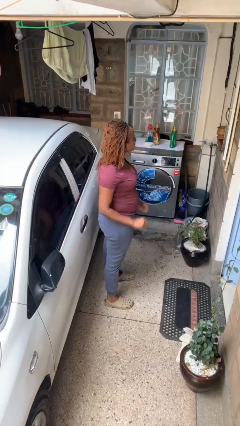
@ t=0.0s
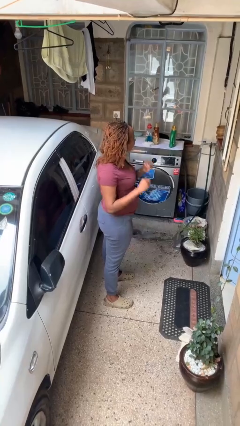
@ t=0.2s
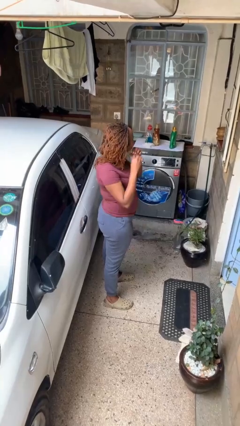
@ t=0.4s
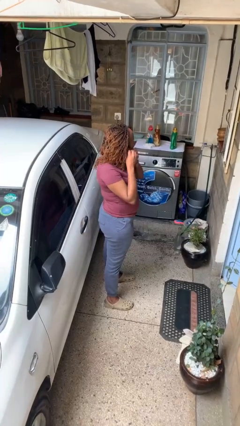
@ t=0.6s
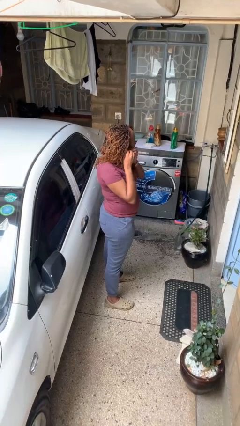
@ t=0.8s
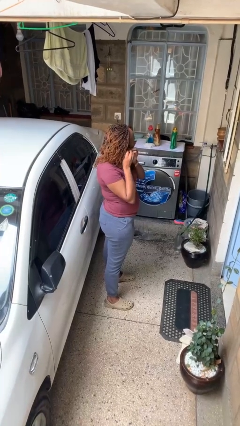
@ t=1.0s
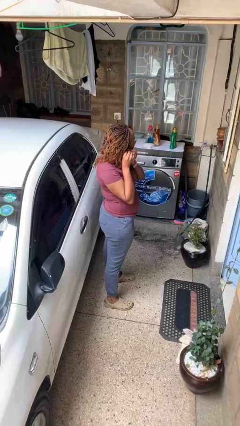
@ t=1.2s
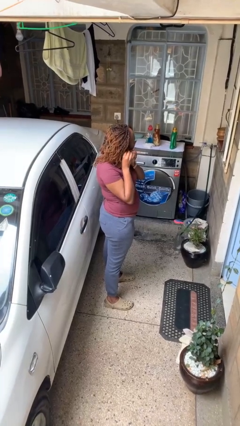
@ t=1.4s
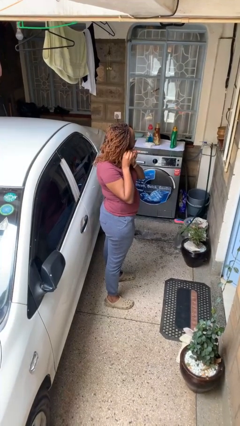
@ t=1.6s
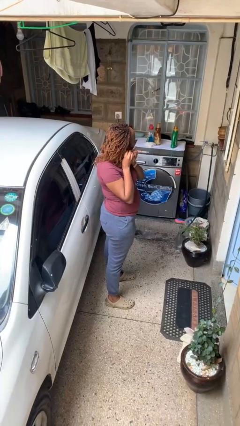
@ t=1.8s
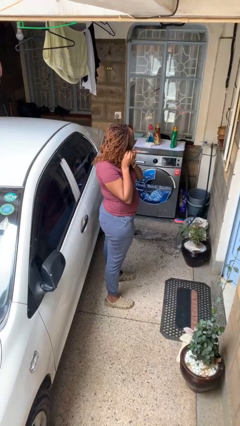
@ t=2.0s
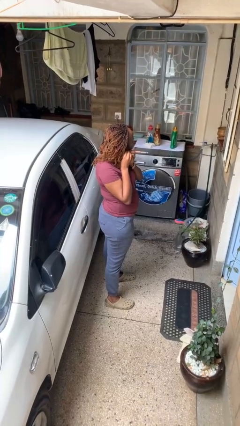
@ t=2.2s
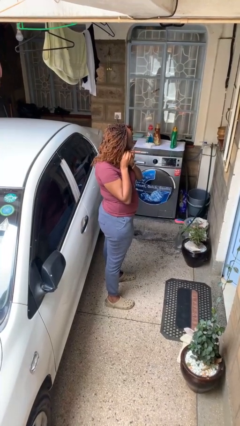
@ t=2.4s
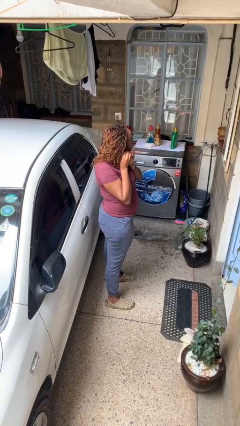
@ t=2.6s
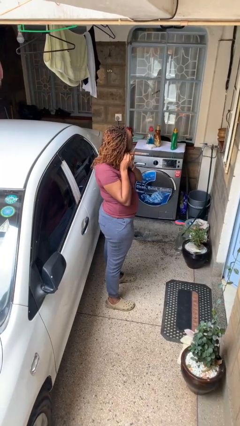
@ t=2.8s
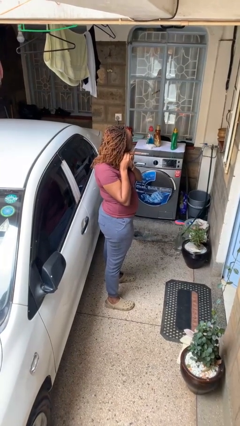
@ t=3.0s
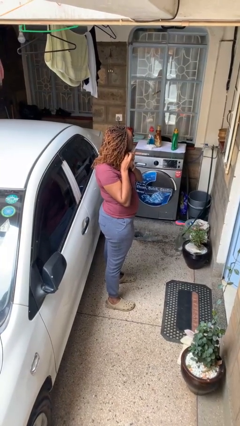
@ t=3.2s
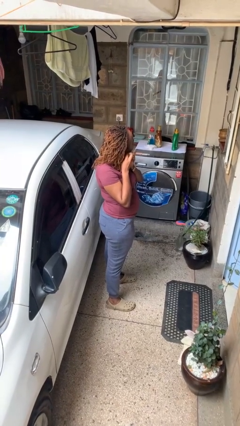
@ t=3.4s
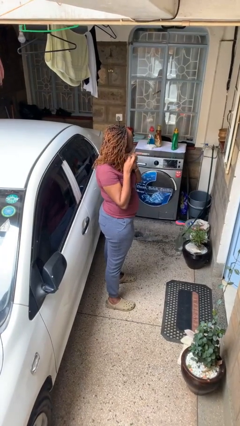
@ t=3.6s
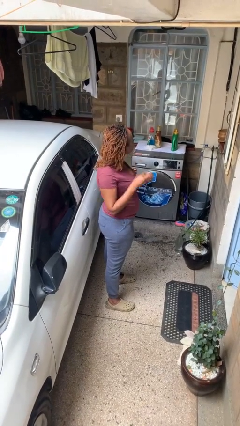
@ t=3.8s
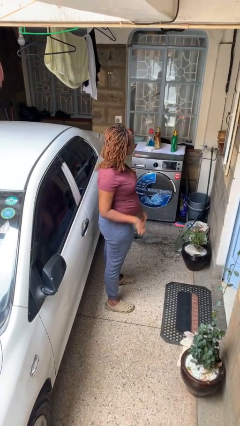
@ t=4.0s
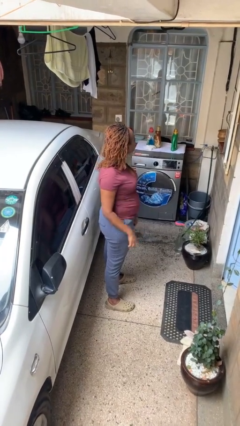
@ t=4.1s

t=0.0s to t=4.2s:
person puts on earrings

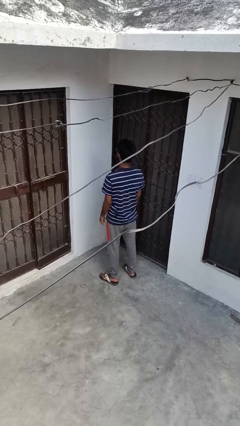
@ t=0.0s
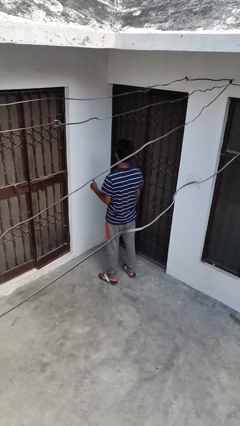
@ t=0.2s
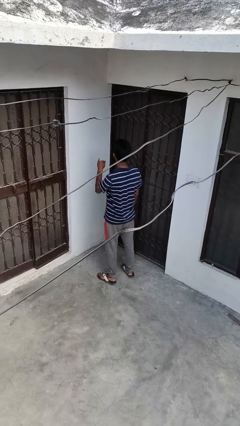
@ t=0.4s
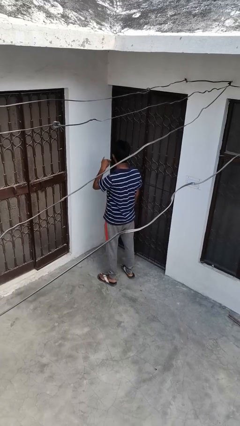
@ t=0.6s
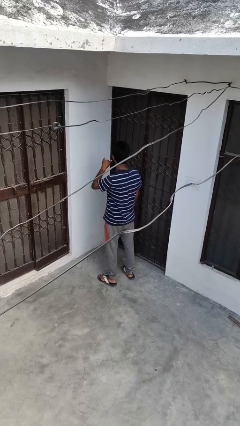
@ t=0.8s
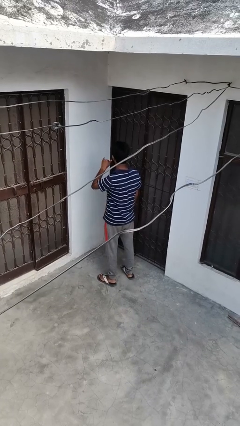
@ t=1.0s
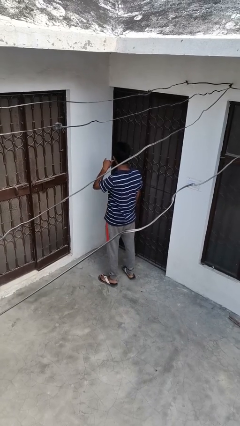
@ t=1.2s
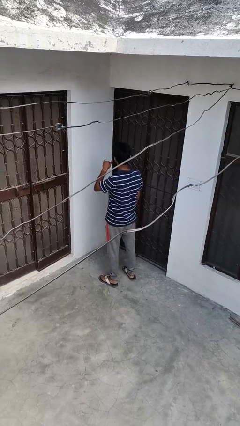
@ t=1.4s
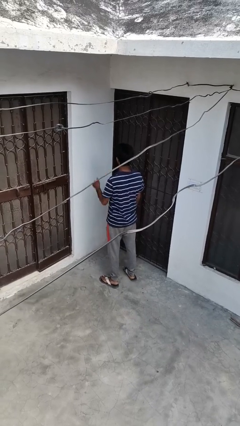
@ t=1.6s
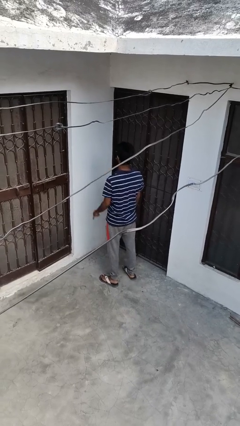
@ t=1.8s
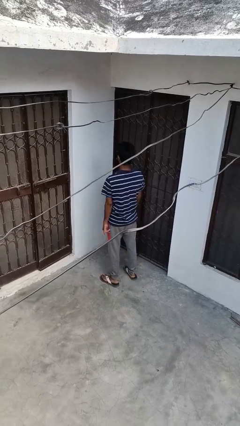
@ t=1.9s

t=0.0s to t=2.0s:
person gestures call me

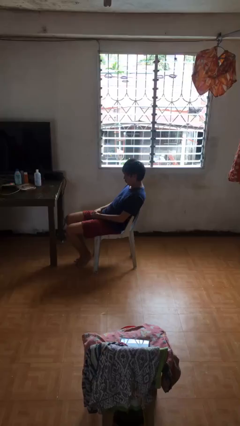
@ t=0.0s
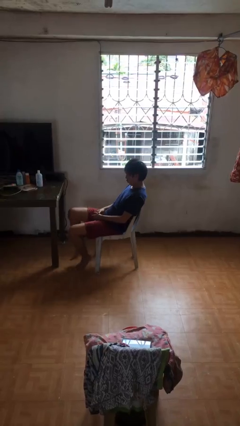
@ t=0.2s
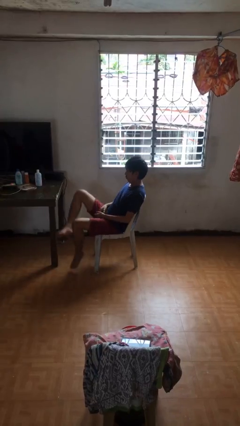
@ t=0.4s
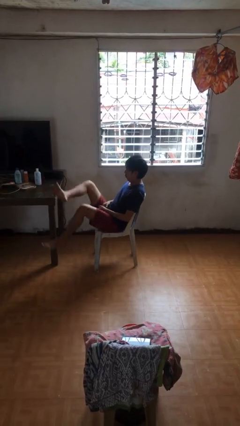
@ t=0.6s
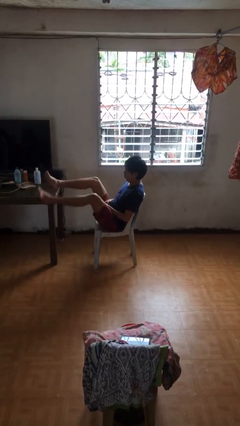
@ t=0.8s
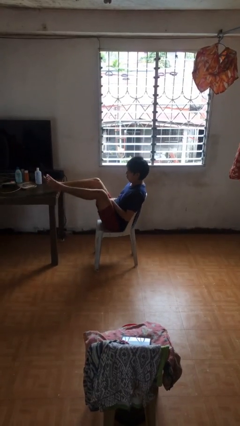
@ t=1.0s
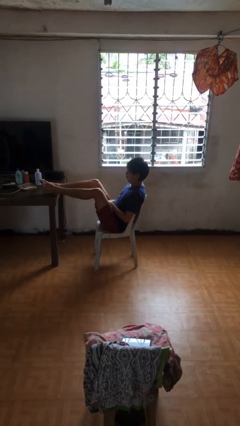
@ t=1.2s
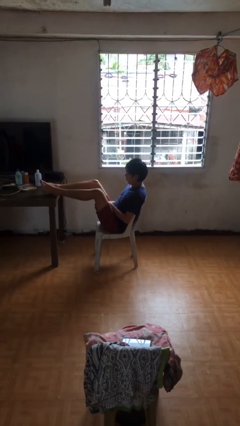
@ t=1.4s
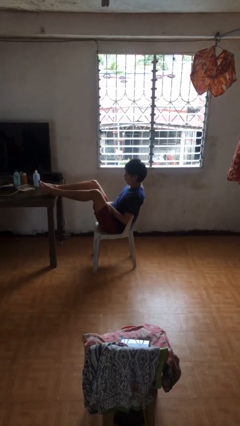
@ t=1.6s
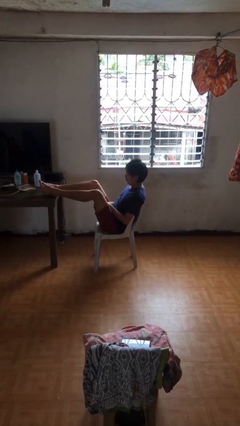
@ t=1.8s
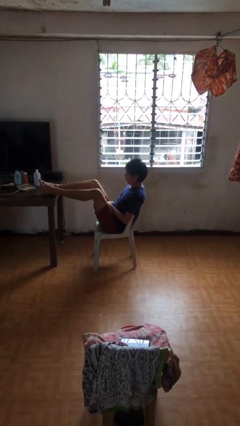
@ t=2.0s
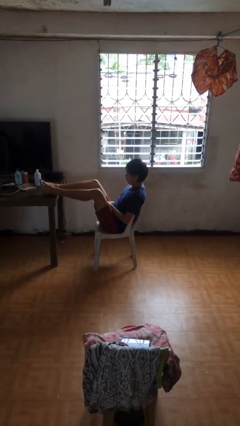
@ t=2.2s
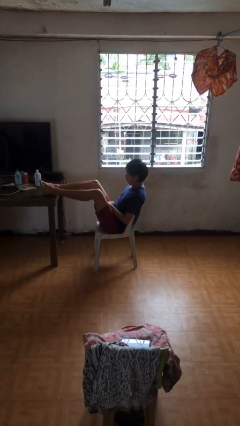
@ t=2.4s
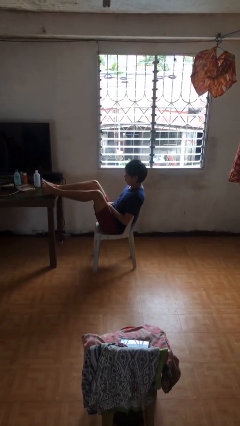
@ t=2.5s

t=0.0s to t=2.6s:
person puts feet up

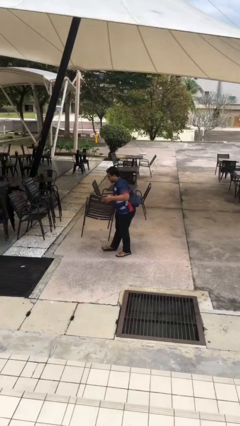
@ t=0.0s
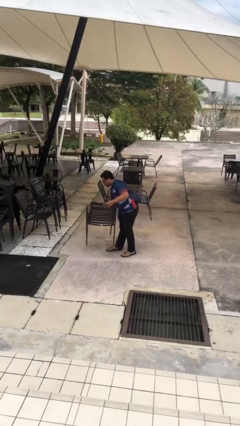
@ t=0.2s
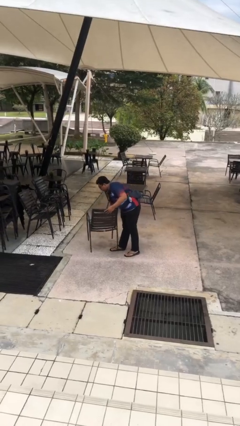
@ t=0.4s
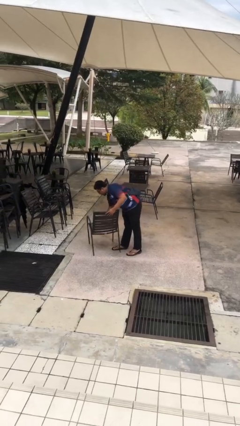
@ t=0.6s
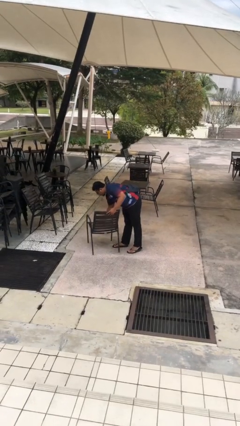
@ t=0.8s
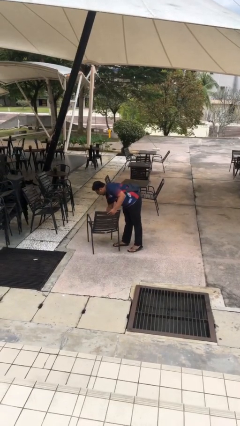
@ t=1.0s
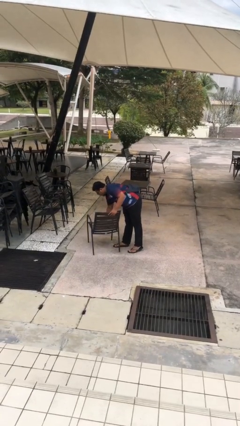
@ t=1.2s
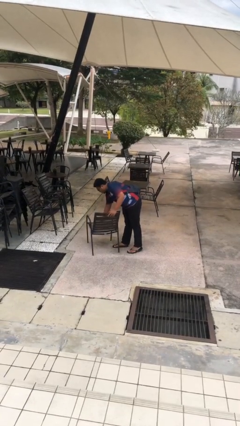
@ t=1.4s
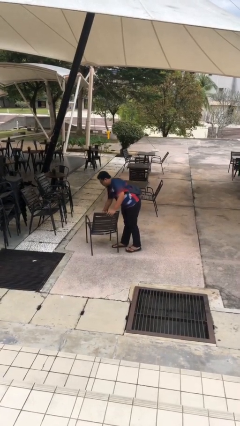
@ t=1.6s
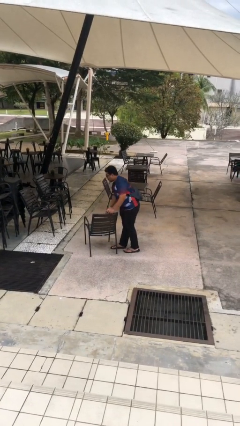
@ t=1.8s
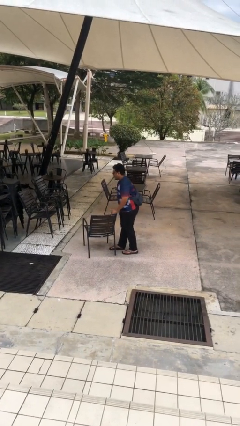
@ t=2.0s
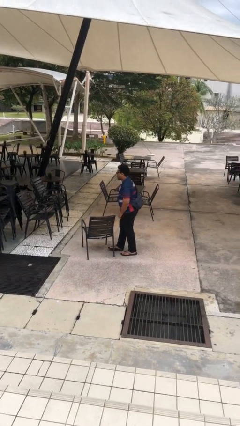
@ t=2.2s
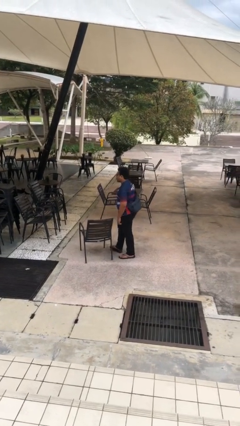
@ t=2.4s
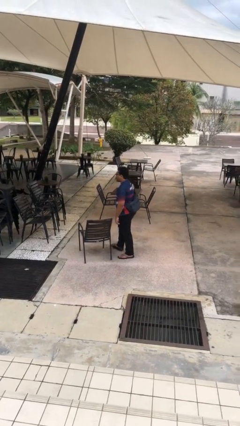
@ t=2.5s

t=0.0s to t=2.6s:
person puts down object on floor

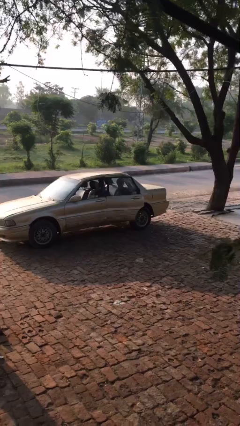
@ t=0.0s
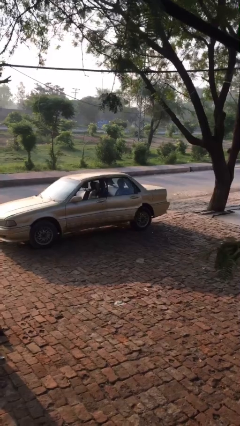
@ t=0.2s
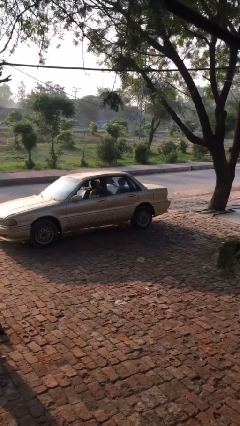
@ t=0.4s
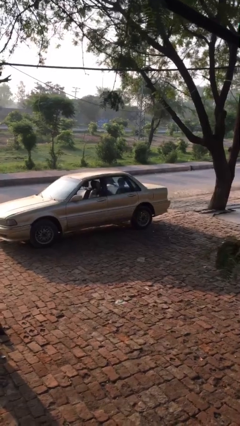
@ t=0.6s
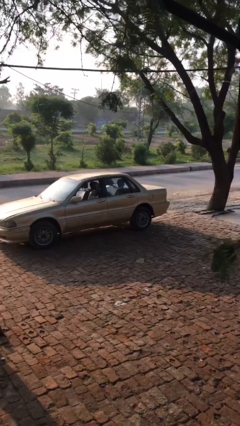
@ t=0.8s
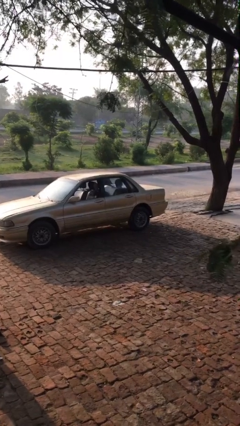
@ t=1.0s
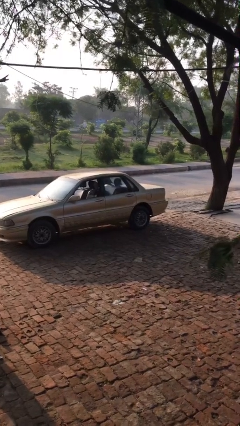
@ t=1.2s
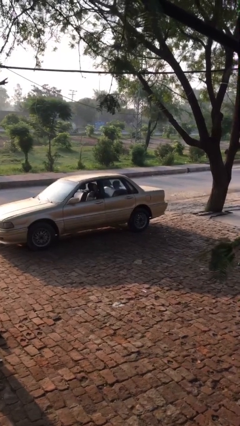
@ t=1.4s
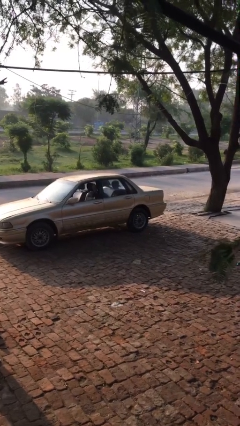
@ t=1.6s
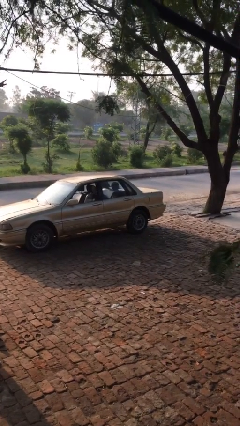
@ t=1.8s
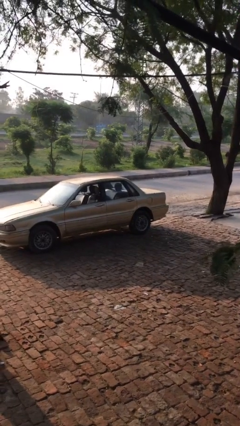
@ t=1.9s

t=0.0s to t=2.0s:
person closes car door

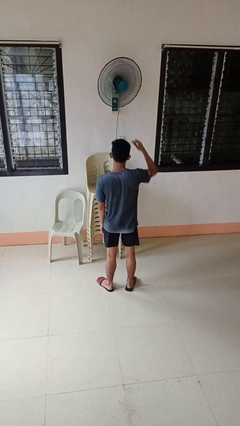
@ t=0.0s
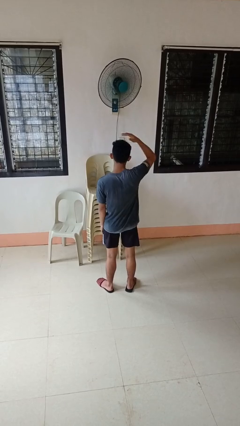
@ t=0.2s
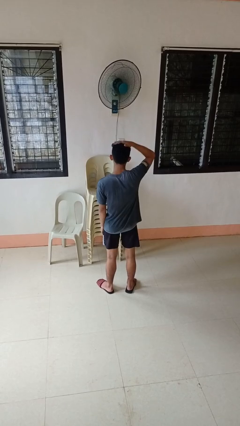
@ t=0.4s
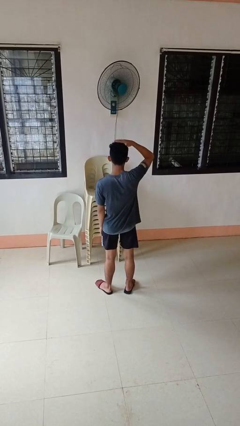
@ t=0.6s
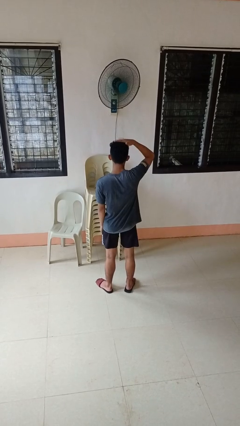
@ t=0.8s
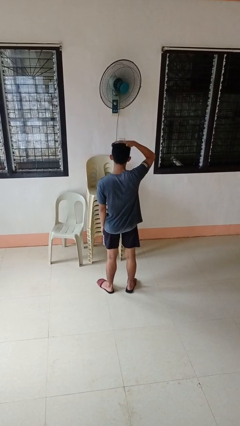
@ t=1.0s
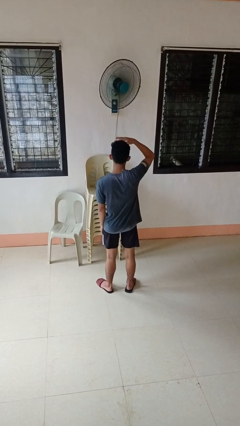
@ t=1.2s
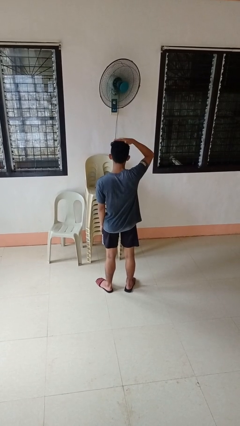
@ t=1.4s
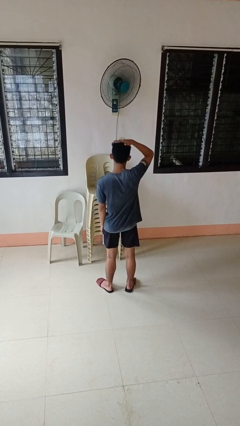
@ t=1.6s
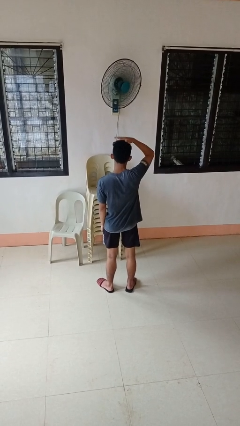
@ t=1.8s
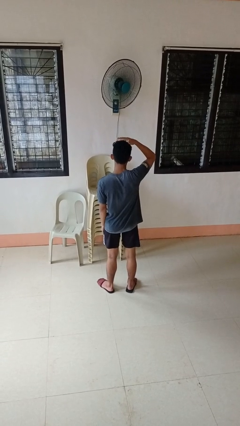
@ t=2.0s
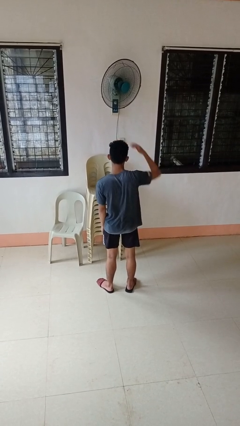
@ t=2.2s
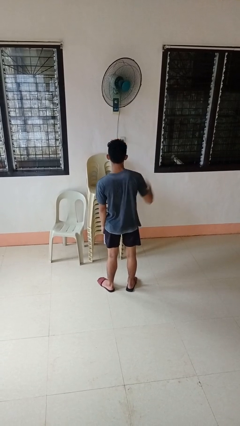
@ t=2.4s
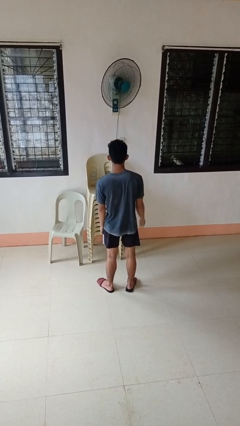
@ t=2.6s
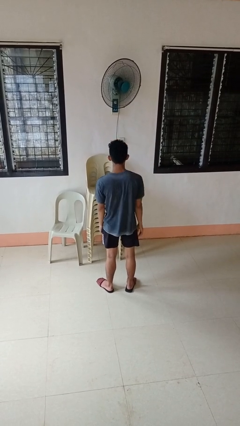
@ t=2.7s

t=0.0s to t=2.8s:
person pats head

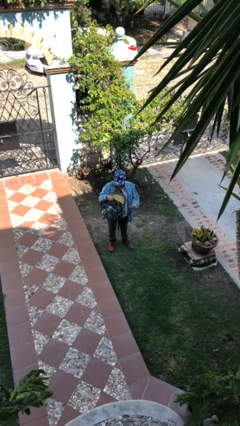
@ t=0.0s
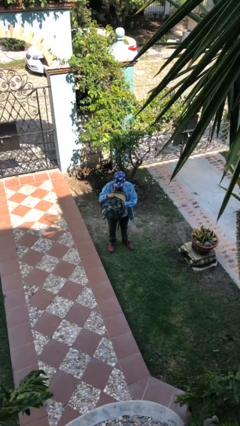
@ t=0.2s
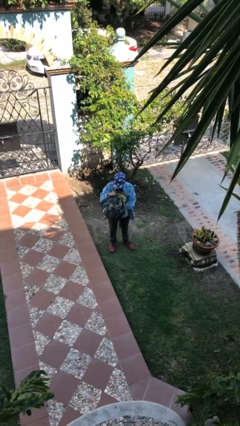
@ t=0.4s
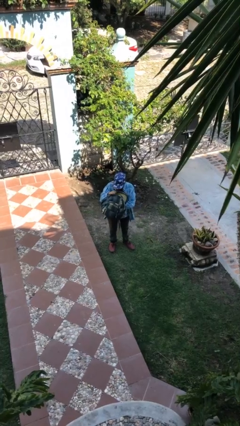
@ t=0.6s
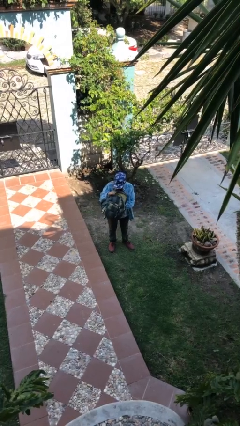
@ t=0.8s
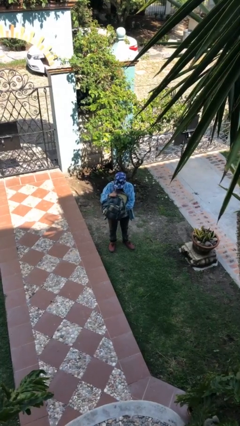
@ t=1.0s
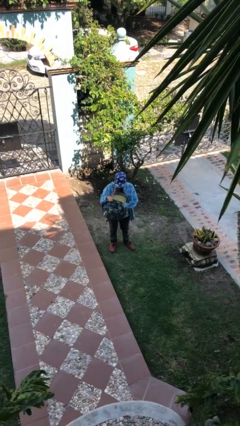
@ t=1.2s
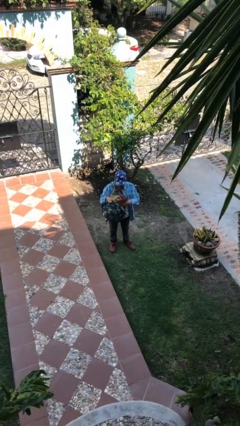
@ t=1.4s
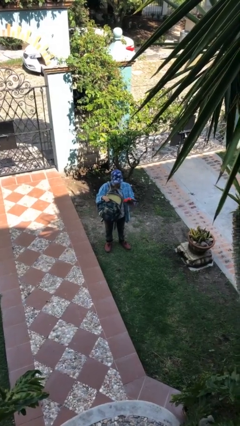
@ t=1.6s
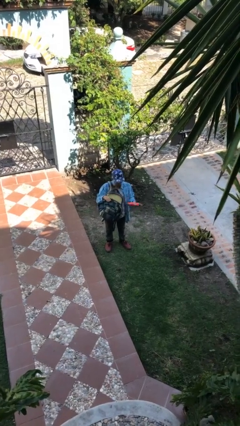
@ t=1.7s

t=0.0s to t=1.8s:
person searches in backpack
